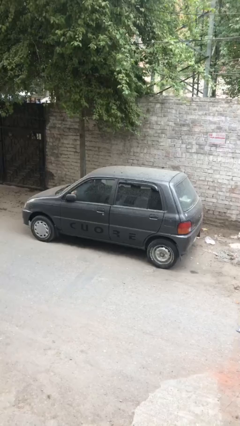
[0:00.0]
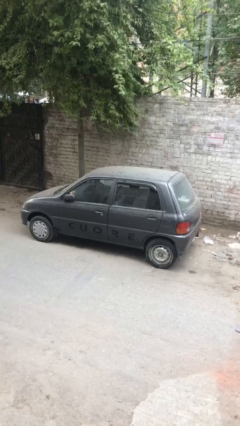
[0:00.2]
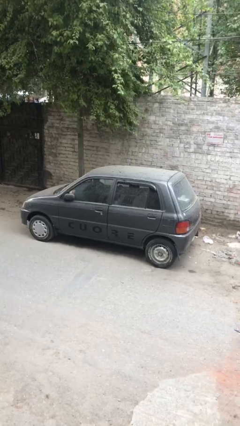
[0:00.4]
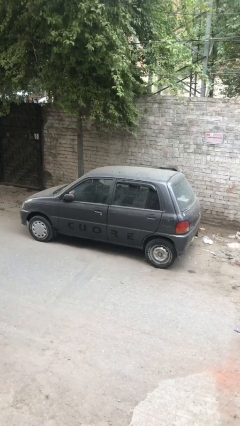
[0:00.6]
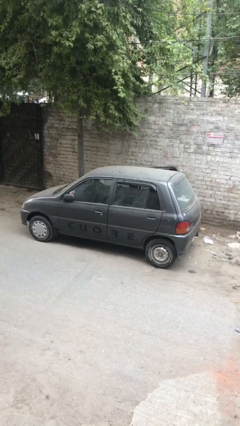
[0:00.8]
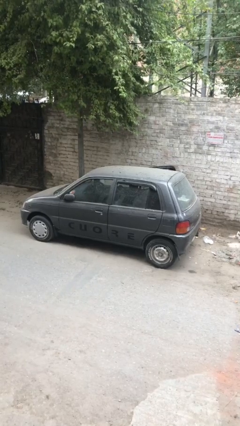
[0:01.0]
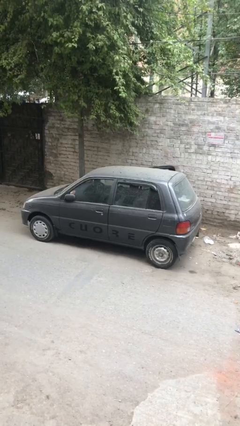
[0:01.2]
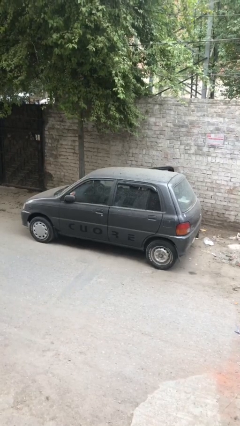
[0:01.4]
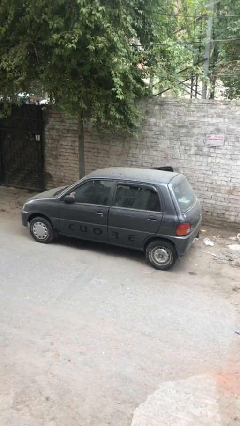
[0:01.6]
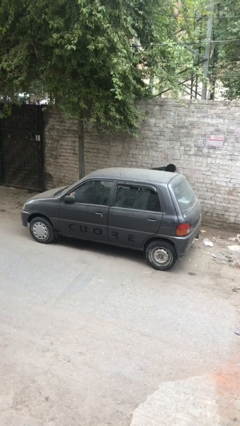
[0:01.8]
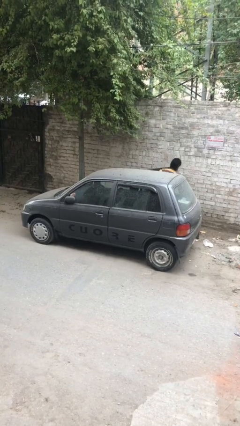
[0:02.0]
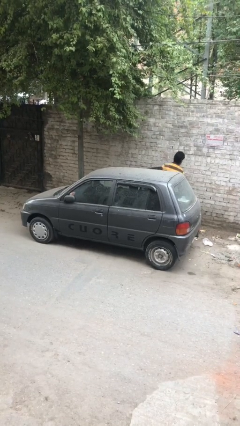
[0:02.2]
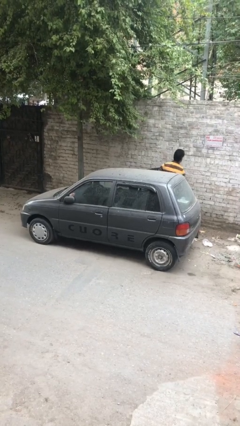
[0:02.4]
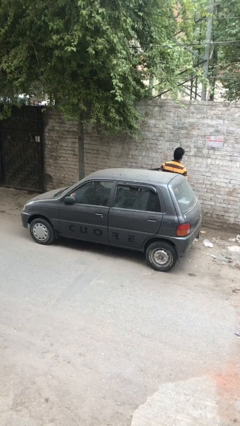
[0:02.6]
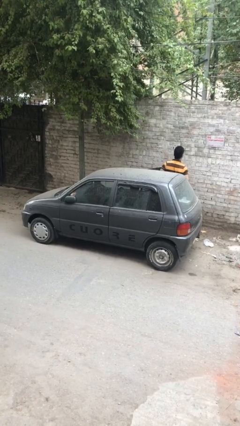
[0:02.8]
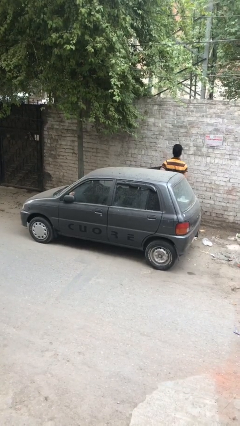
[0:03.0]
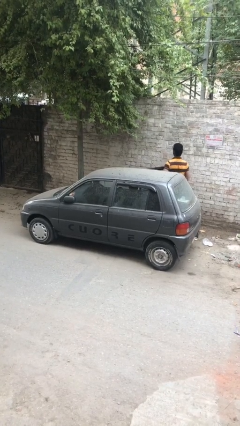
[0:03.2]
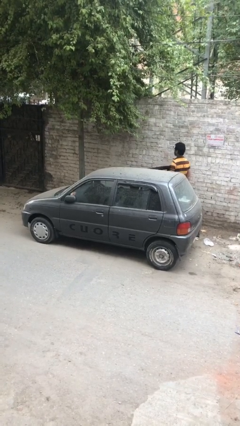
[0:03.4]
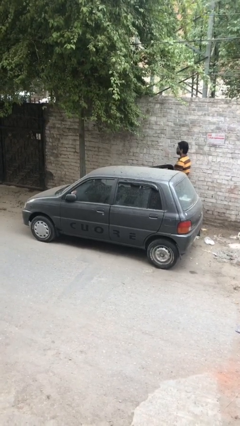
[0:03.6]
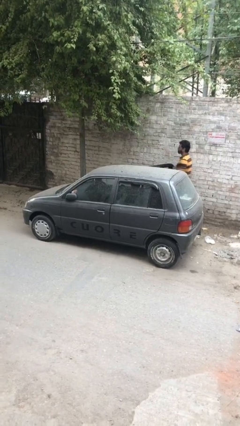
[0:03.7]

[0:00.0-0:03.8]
car drops off person

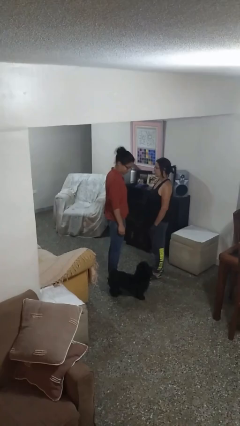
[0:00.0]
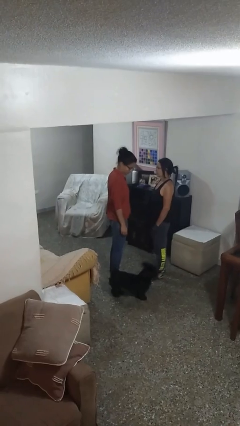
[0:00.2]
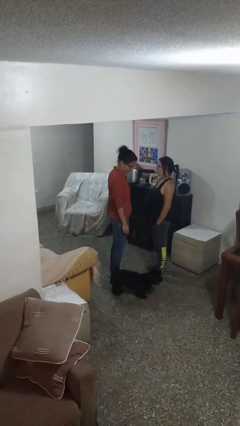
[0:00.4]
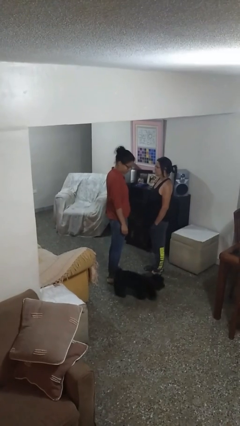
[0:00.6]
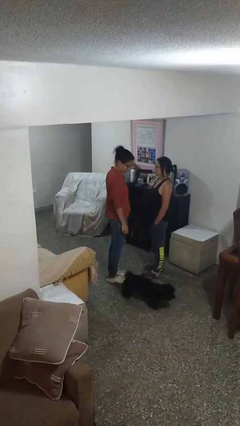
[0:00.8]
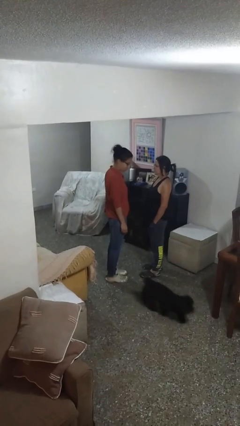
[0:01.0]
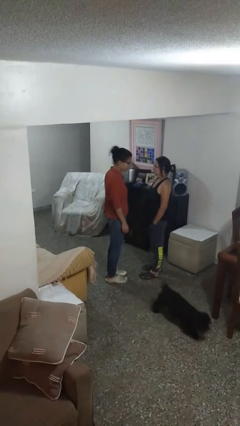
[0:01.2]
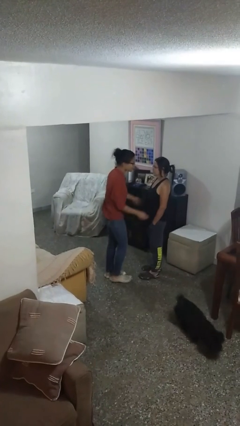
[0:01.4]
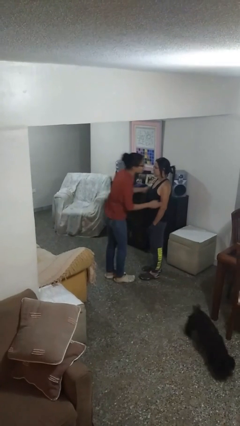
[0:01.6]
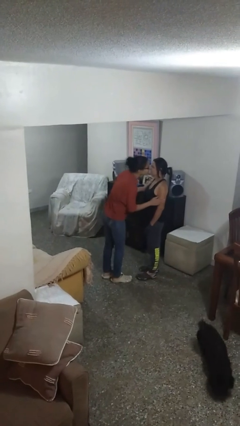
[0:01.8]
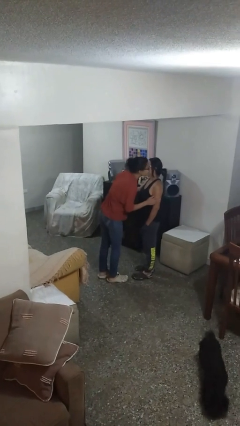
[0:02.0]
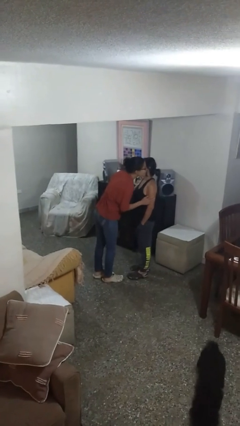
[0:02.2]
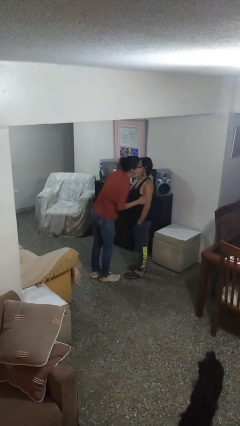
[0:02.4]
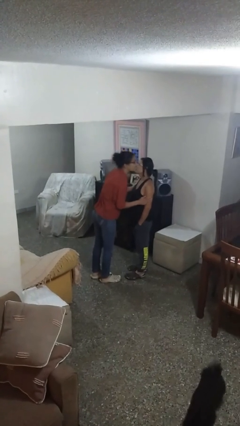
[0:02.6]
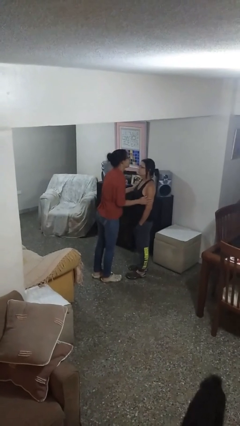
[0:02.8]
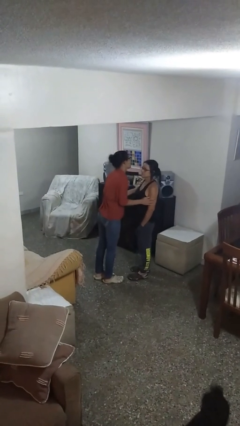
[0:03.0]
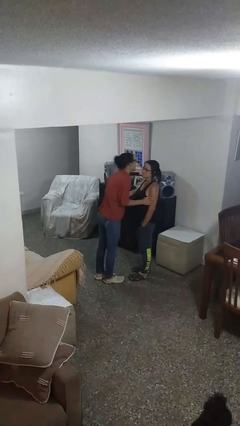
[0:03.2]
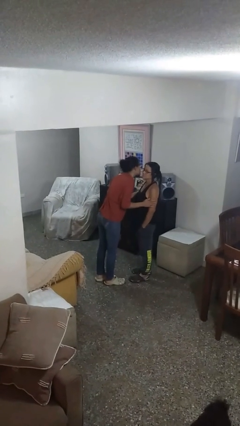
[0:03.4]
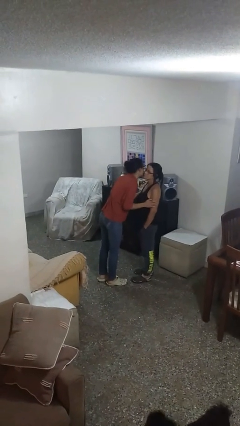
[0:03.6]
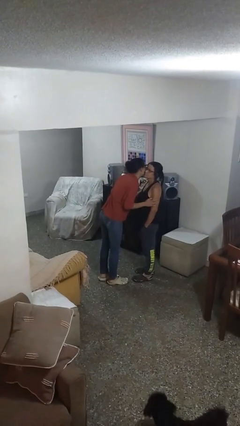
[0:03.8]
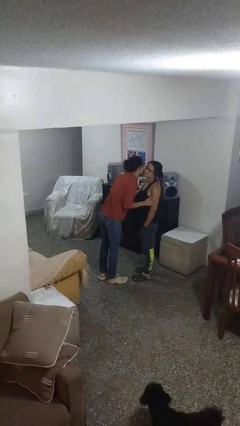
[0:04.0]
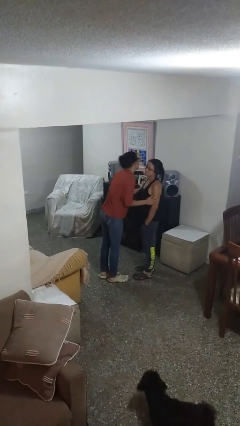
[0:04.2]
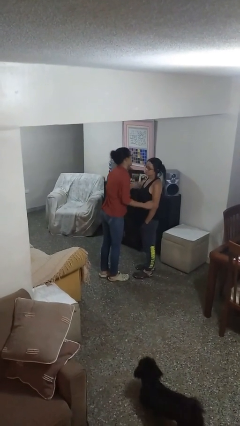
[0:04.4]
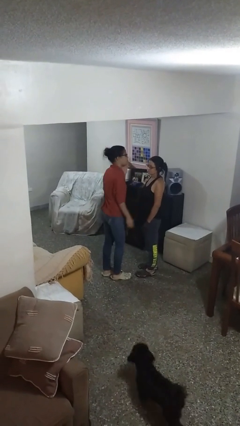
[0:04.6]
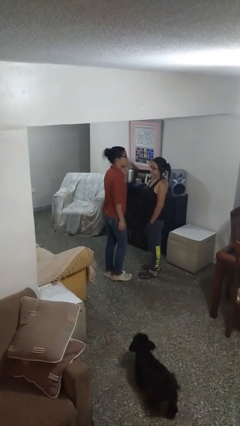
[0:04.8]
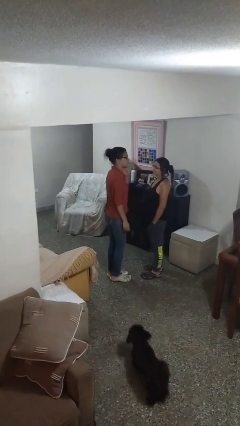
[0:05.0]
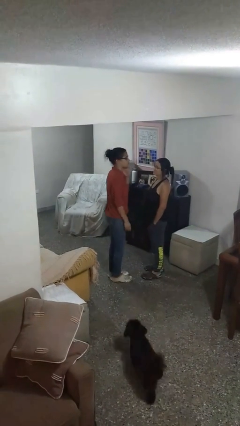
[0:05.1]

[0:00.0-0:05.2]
person kisses cheek of person

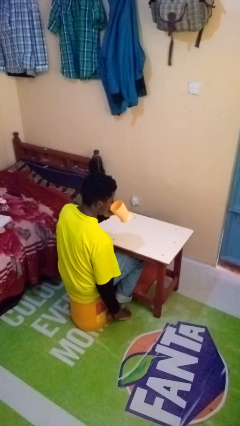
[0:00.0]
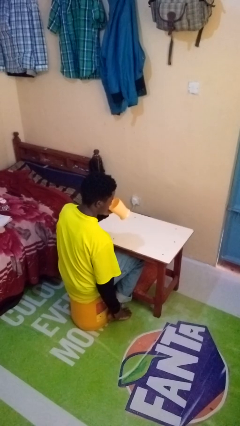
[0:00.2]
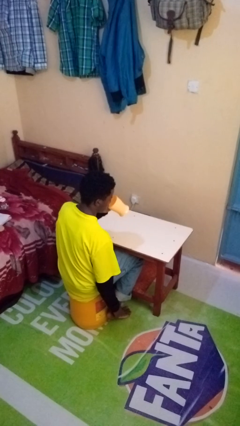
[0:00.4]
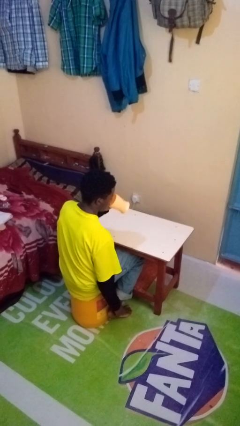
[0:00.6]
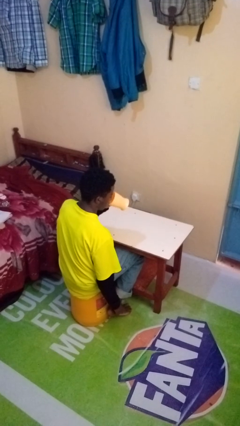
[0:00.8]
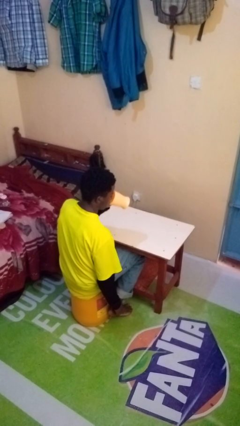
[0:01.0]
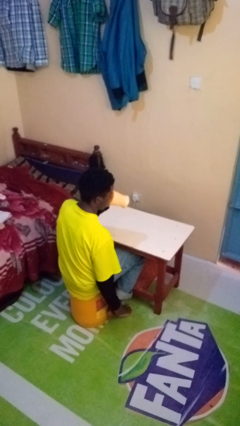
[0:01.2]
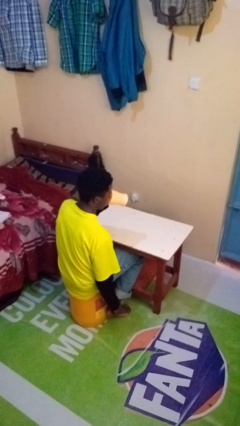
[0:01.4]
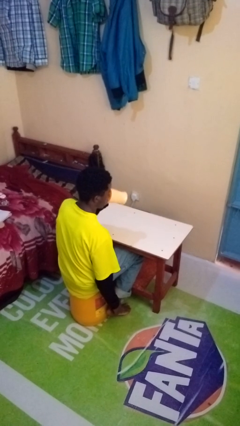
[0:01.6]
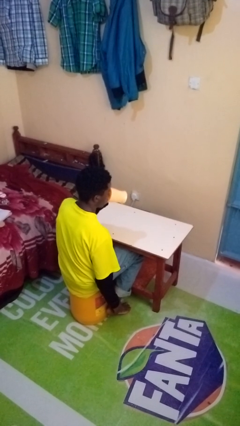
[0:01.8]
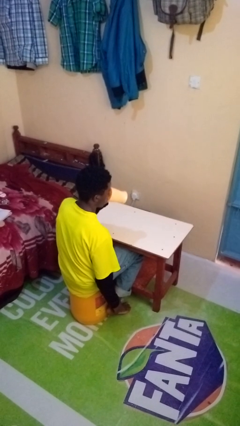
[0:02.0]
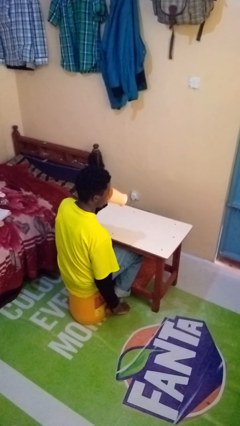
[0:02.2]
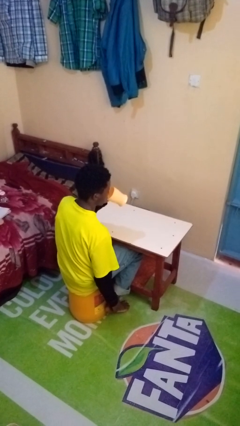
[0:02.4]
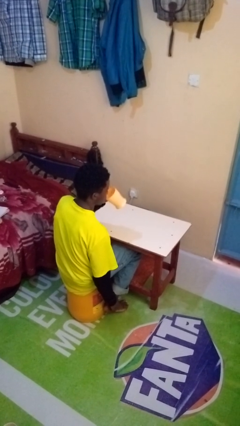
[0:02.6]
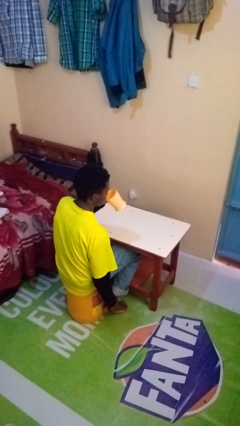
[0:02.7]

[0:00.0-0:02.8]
person drinks from mug

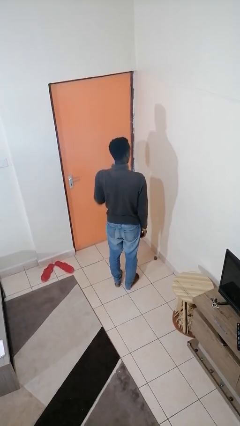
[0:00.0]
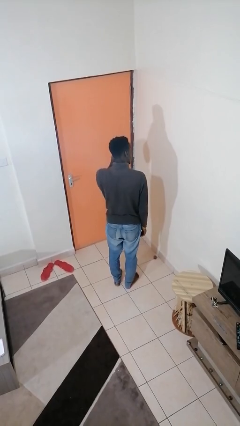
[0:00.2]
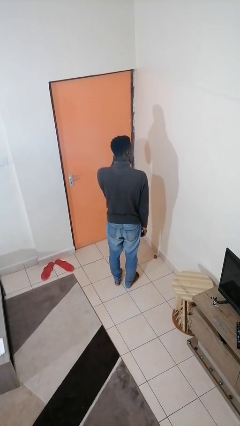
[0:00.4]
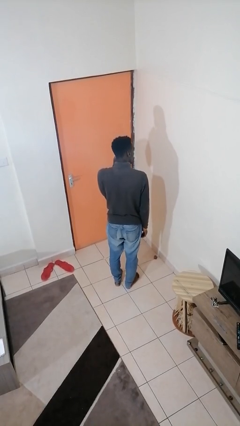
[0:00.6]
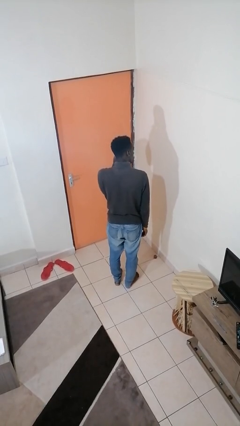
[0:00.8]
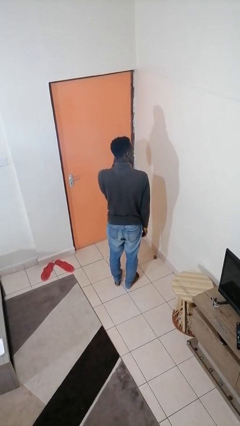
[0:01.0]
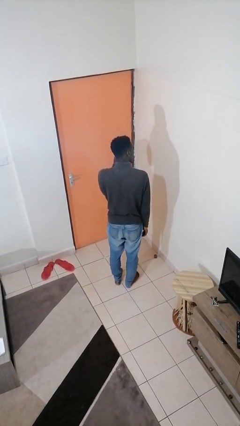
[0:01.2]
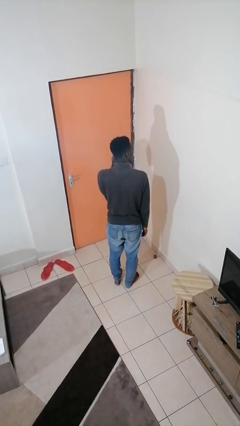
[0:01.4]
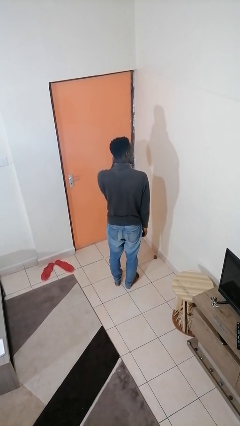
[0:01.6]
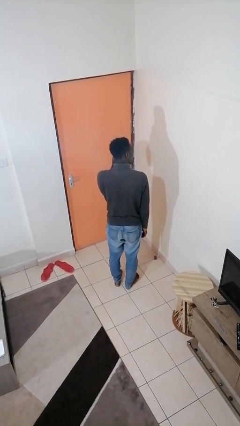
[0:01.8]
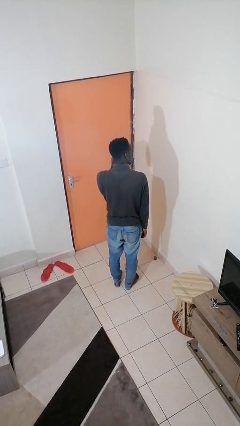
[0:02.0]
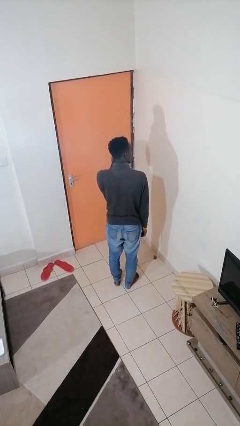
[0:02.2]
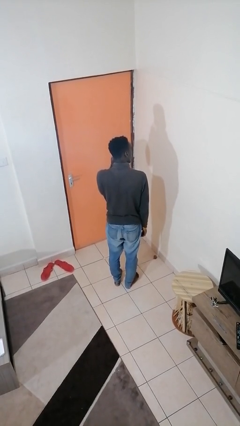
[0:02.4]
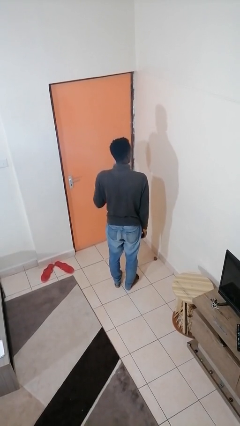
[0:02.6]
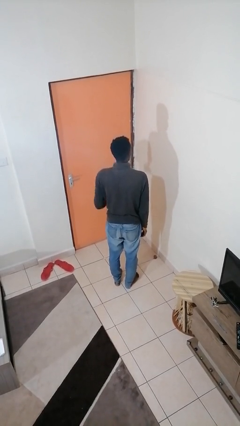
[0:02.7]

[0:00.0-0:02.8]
person touches earlobe

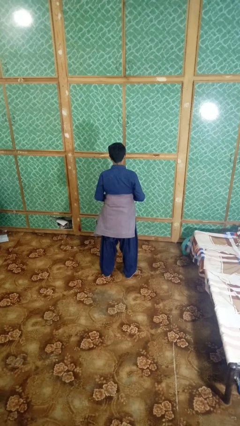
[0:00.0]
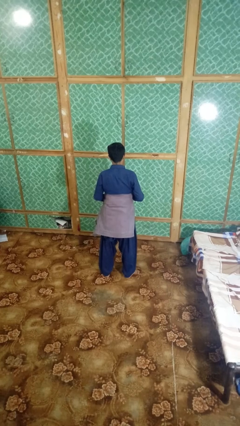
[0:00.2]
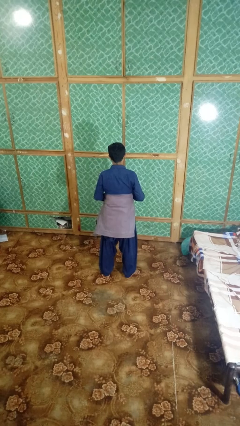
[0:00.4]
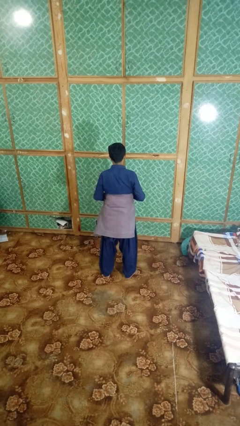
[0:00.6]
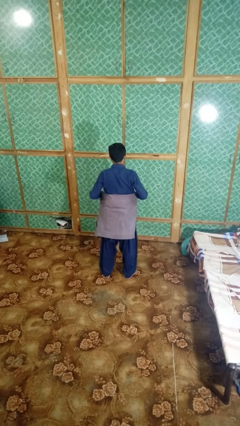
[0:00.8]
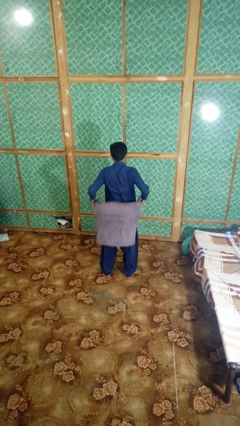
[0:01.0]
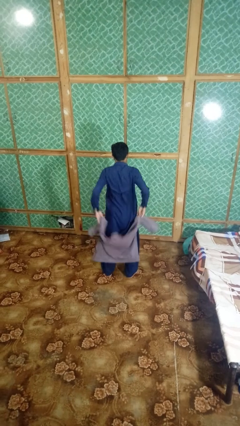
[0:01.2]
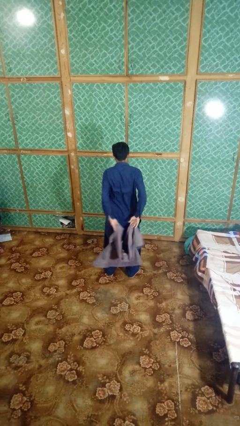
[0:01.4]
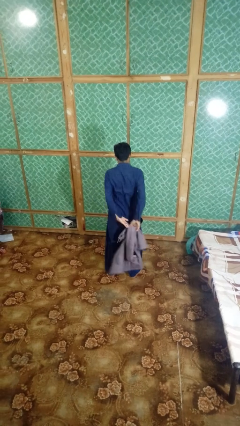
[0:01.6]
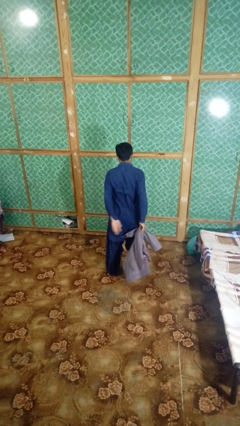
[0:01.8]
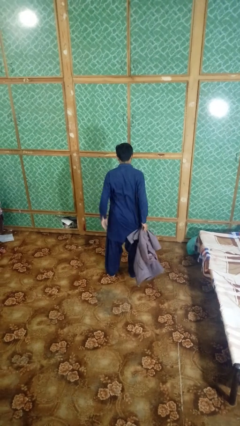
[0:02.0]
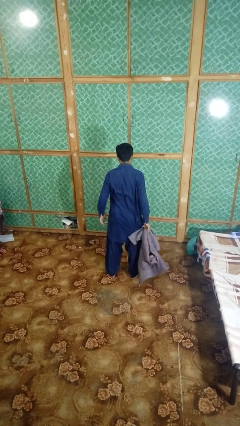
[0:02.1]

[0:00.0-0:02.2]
person unties jacket around waist

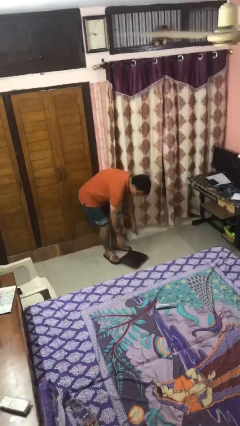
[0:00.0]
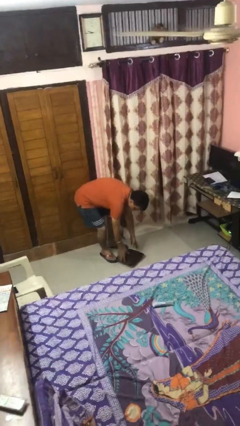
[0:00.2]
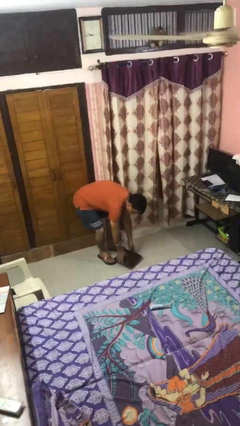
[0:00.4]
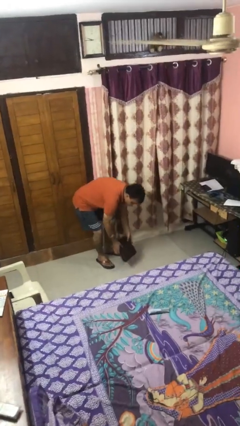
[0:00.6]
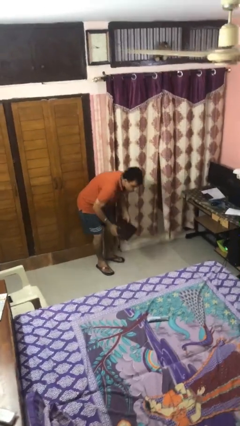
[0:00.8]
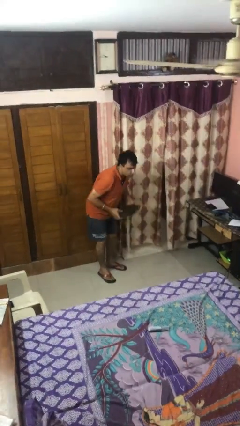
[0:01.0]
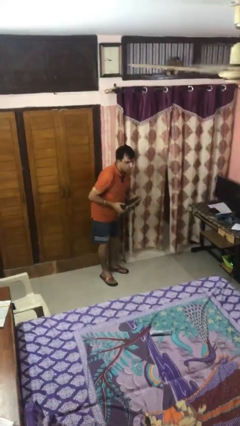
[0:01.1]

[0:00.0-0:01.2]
person picks up object from floor
